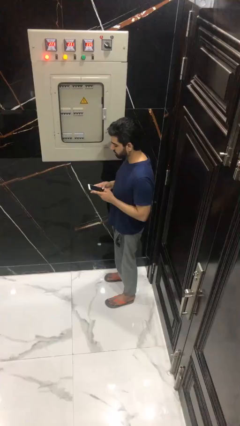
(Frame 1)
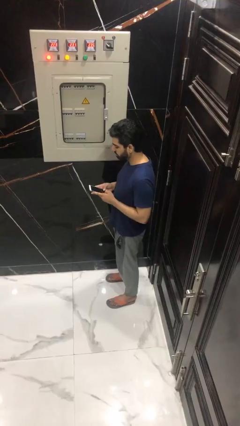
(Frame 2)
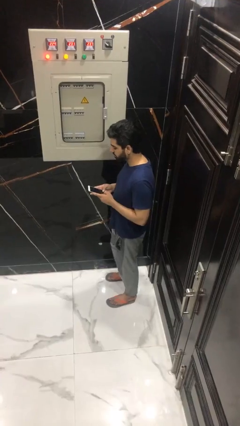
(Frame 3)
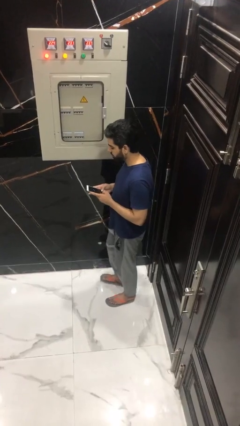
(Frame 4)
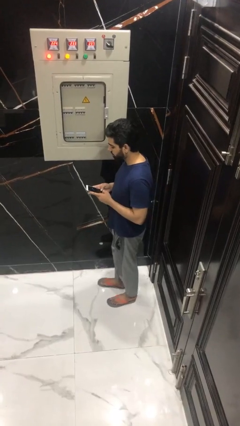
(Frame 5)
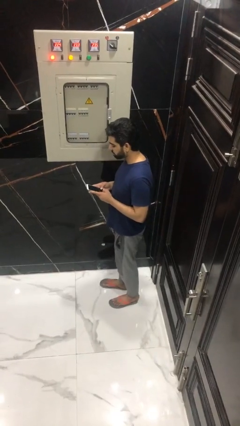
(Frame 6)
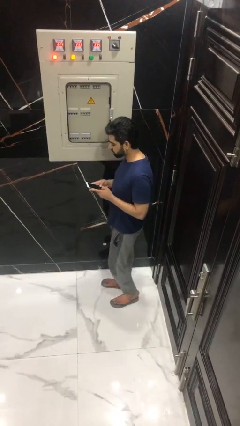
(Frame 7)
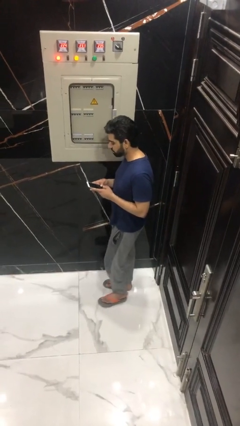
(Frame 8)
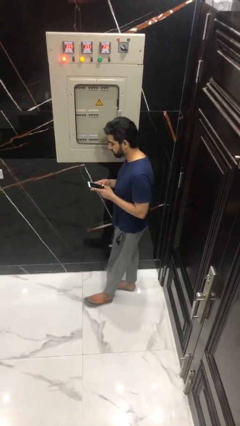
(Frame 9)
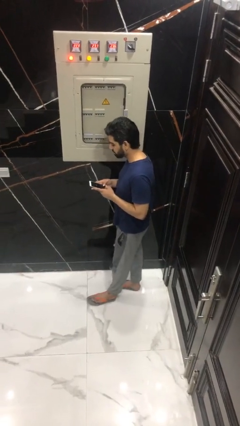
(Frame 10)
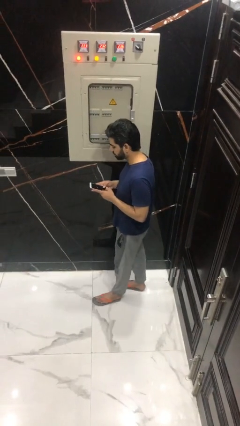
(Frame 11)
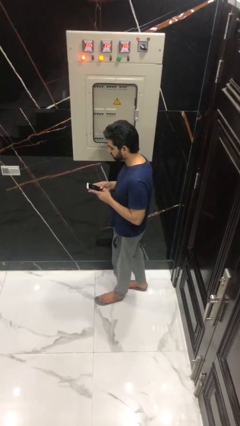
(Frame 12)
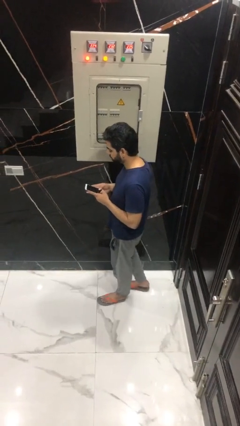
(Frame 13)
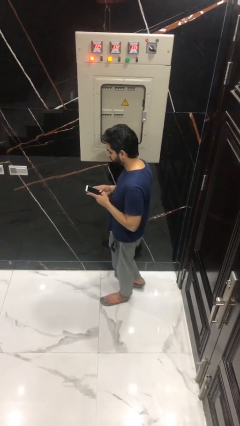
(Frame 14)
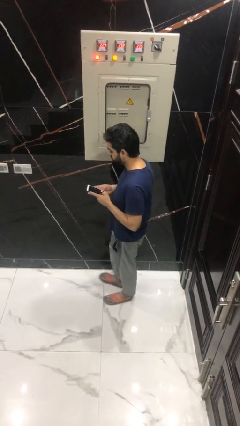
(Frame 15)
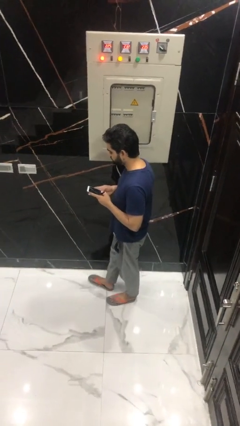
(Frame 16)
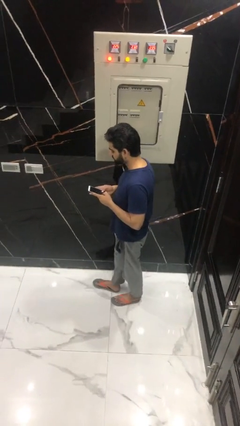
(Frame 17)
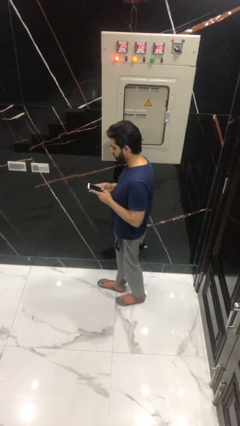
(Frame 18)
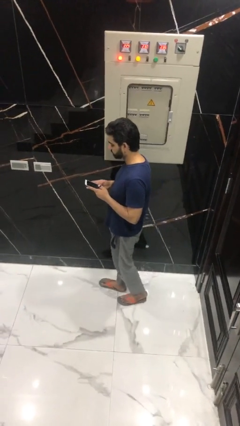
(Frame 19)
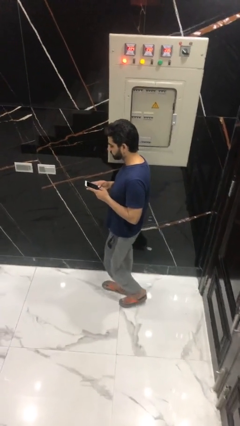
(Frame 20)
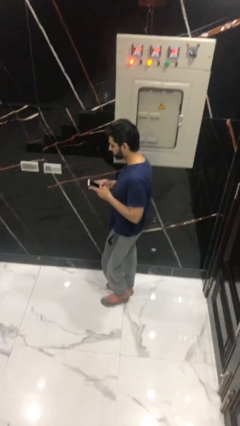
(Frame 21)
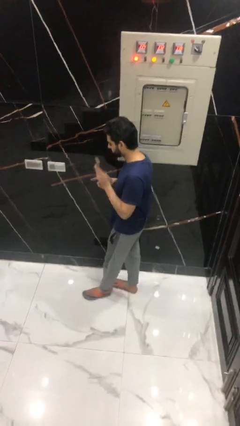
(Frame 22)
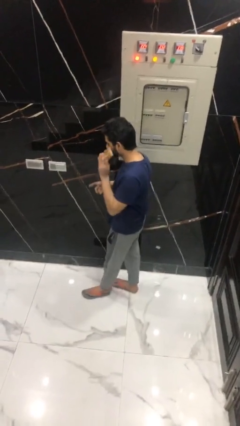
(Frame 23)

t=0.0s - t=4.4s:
person texts on phone

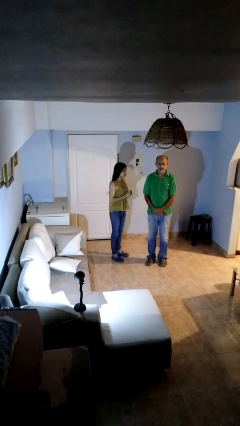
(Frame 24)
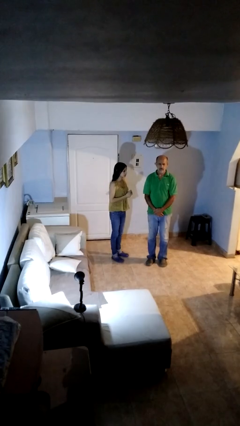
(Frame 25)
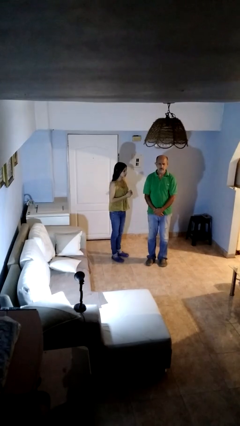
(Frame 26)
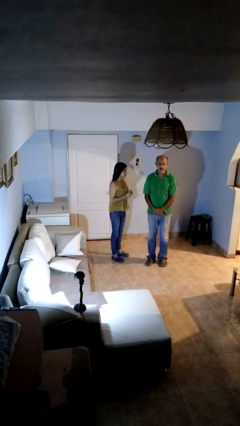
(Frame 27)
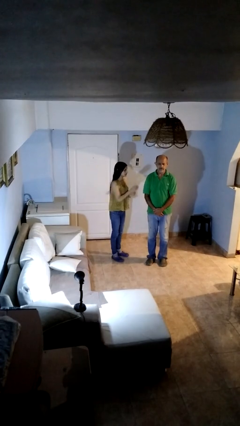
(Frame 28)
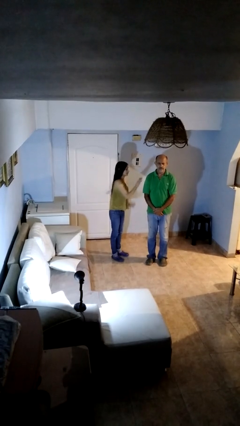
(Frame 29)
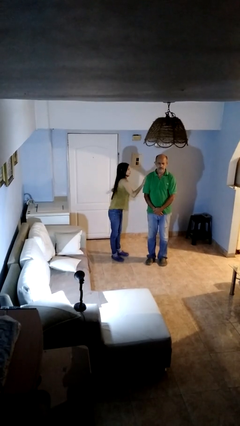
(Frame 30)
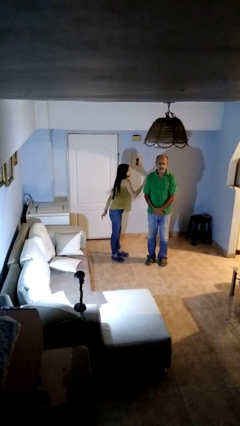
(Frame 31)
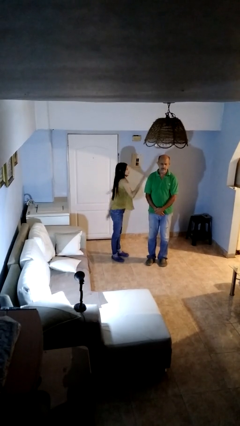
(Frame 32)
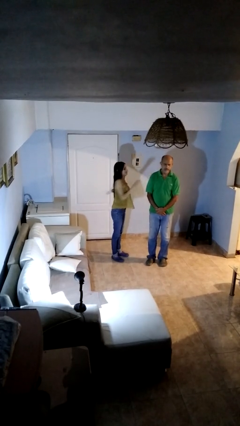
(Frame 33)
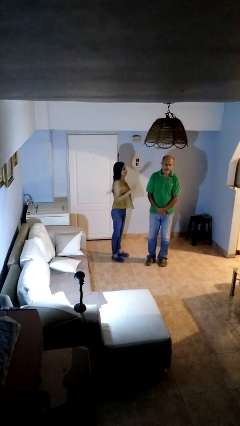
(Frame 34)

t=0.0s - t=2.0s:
person shoves person

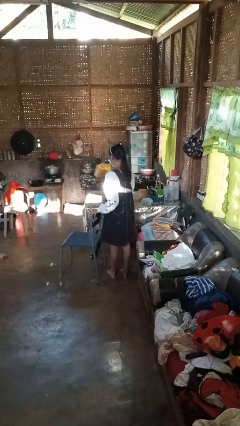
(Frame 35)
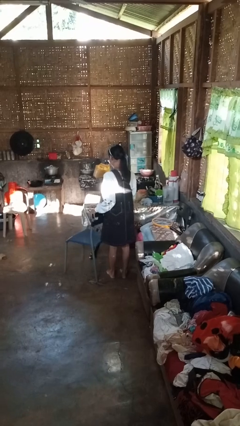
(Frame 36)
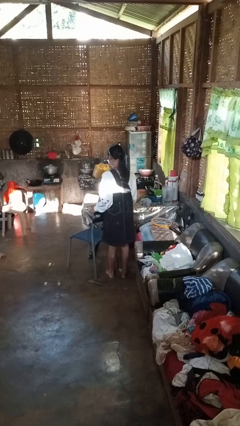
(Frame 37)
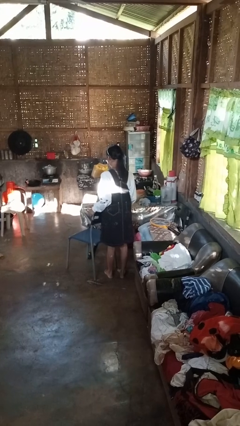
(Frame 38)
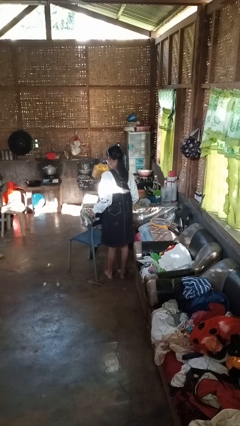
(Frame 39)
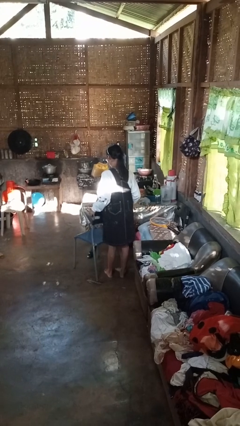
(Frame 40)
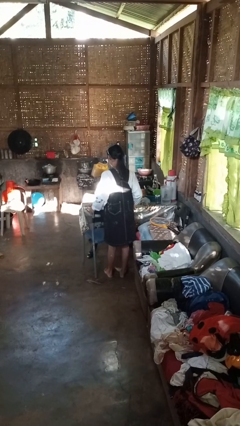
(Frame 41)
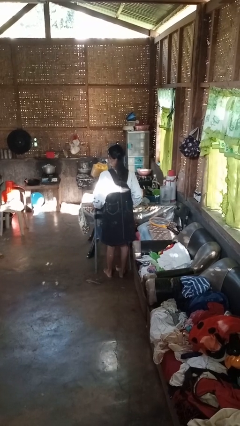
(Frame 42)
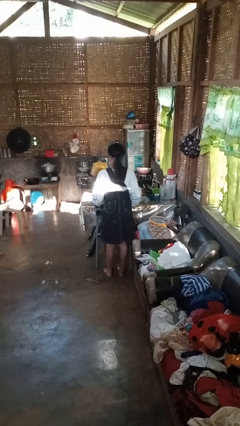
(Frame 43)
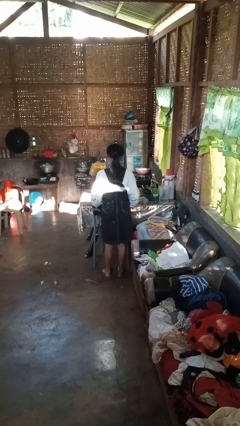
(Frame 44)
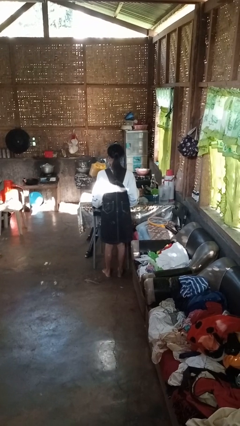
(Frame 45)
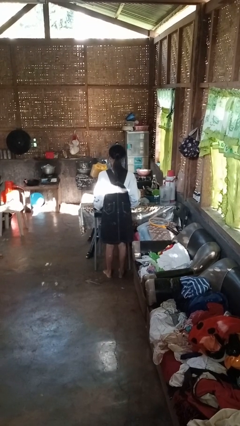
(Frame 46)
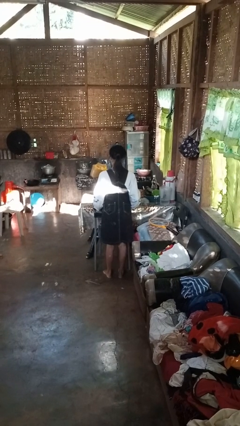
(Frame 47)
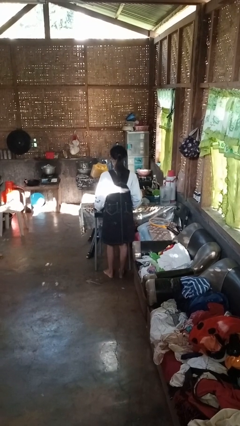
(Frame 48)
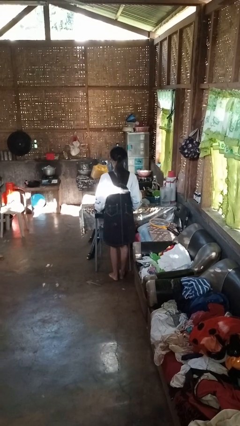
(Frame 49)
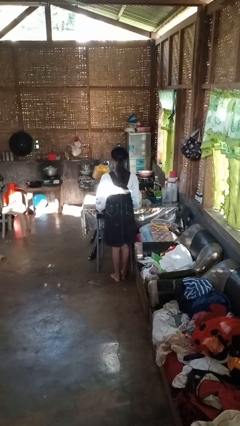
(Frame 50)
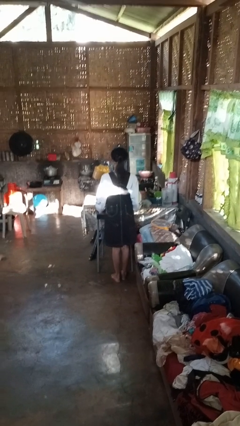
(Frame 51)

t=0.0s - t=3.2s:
person pushes in chair

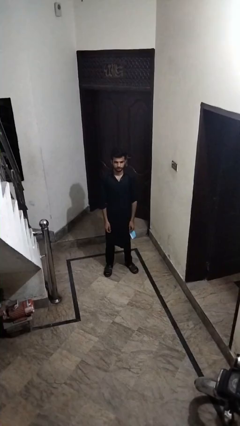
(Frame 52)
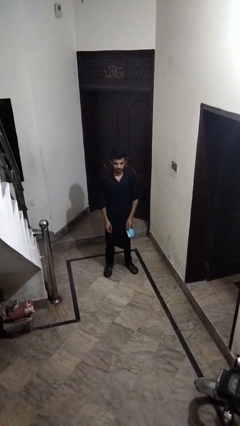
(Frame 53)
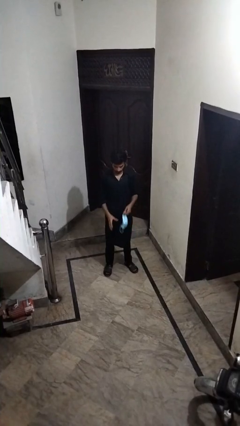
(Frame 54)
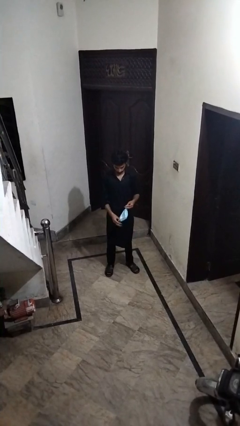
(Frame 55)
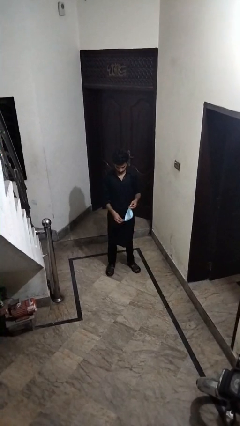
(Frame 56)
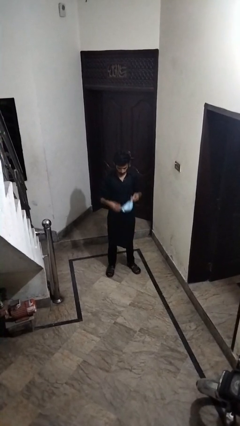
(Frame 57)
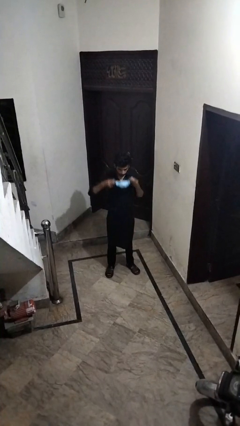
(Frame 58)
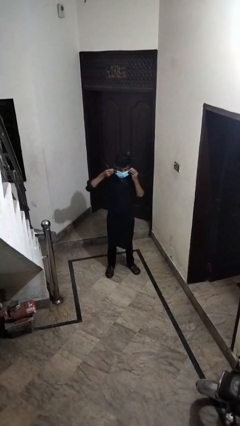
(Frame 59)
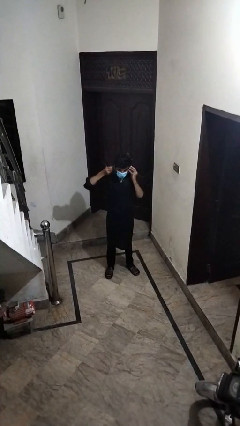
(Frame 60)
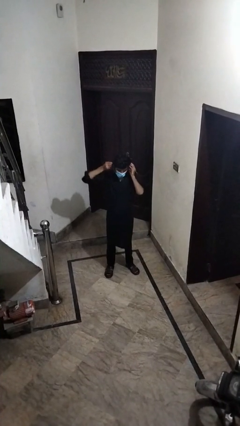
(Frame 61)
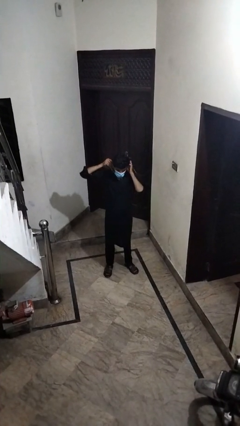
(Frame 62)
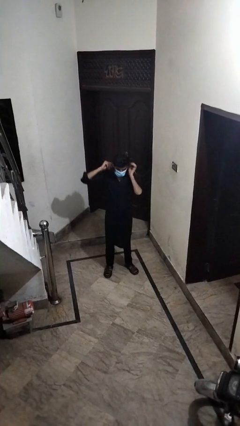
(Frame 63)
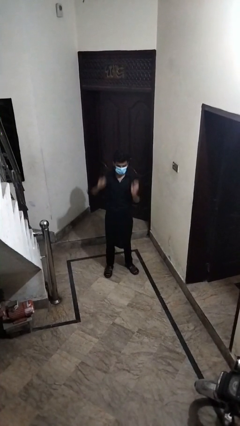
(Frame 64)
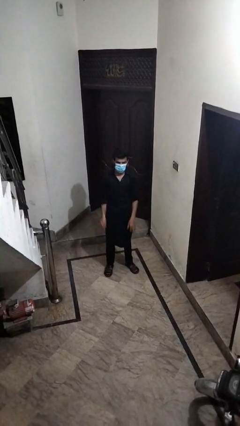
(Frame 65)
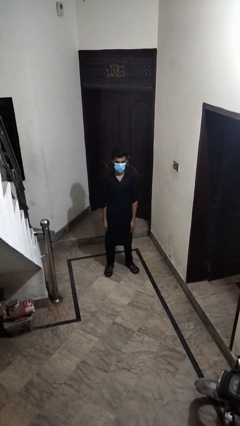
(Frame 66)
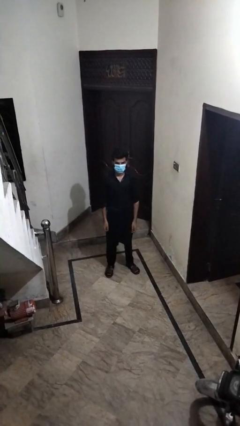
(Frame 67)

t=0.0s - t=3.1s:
person puts on facemask

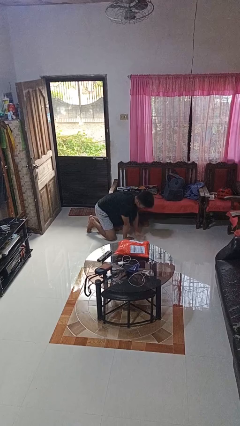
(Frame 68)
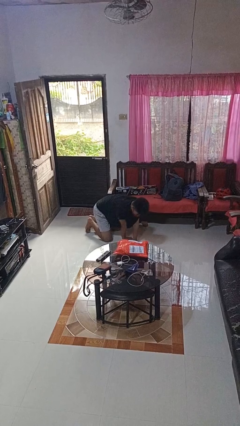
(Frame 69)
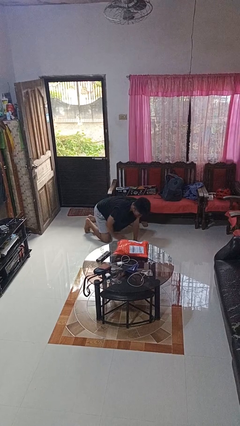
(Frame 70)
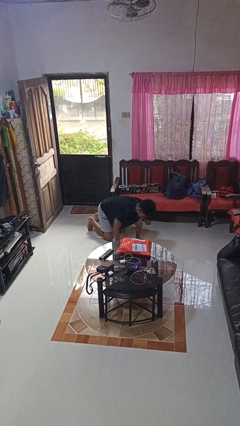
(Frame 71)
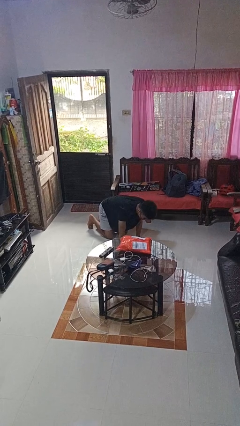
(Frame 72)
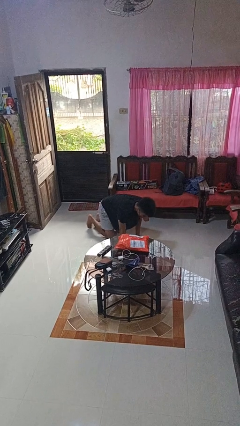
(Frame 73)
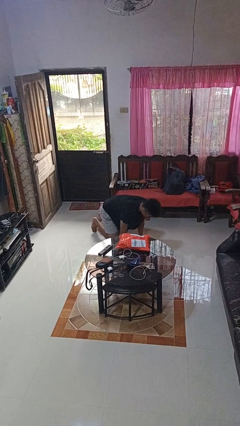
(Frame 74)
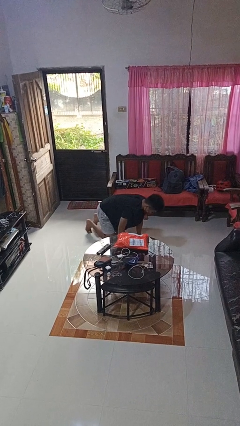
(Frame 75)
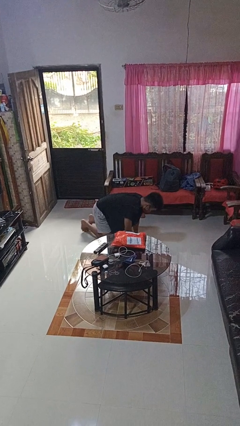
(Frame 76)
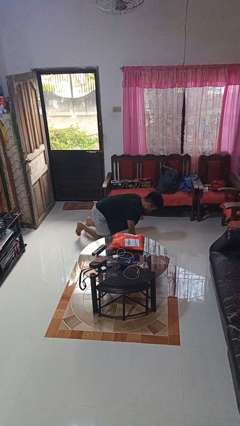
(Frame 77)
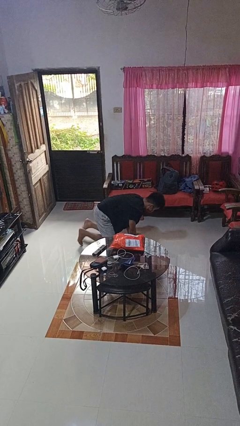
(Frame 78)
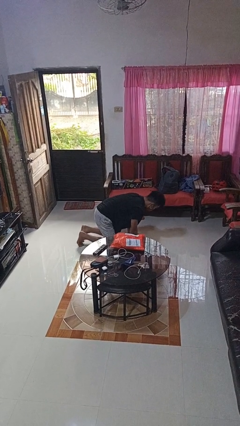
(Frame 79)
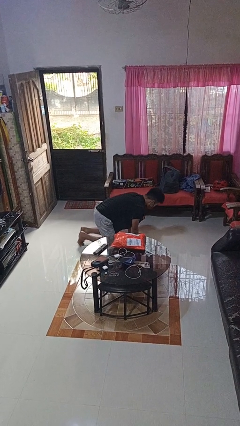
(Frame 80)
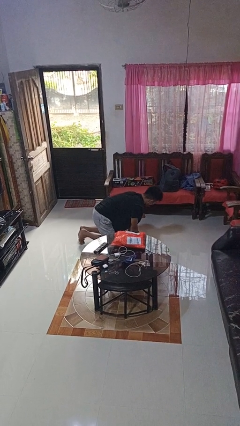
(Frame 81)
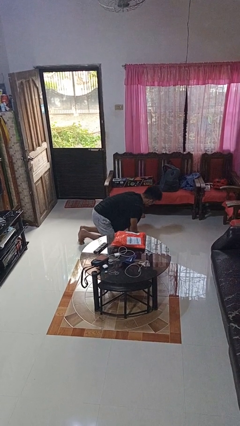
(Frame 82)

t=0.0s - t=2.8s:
person crawls

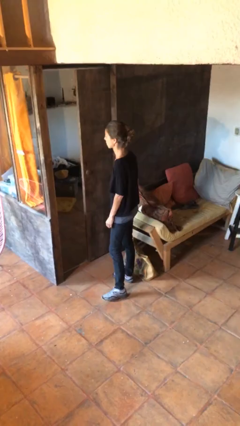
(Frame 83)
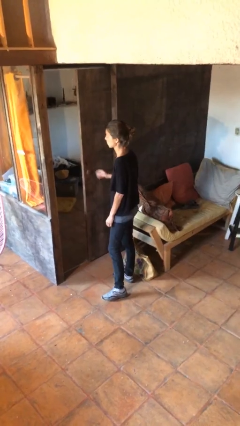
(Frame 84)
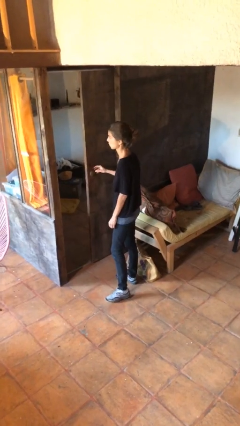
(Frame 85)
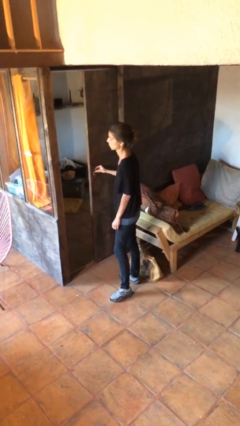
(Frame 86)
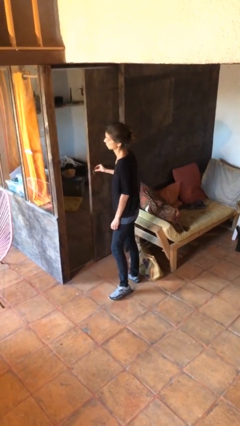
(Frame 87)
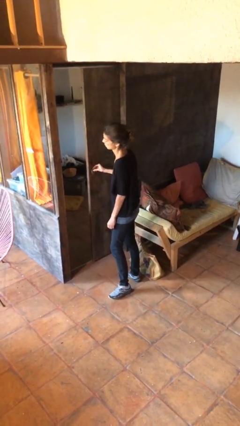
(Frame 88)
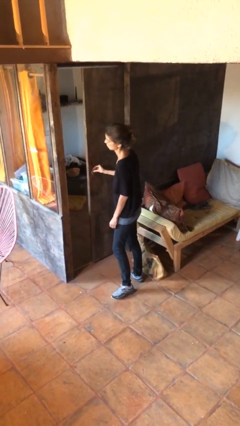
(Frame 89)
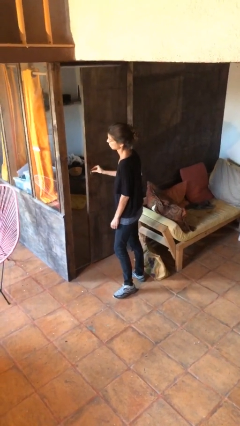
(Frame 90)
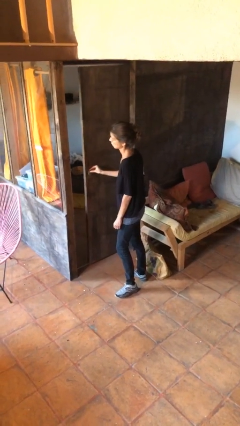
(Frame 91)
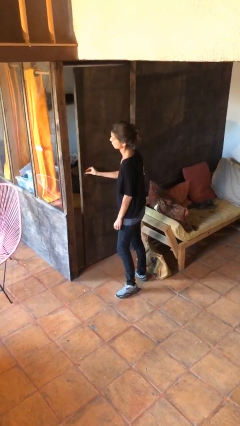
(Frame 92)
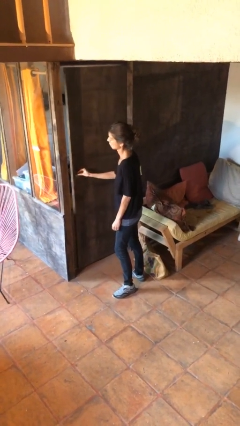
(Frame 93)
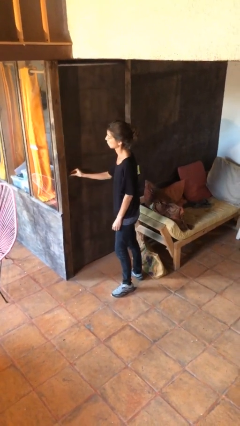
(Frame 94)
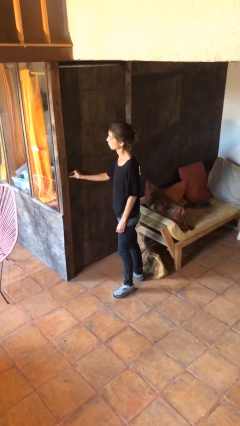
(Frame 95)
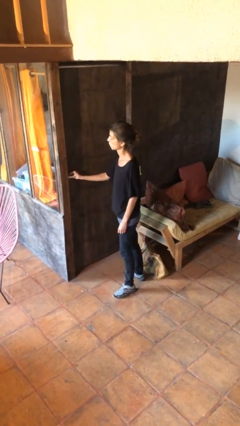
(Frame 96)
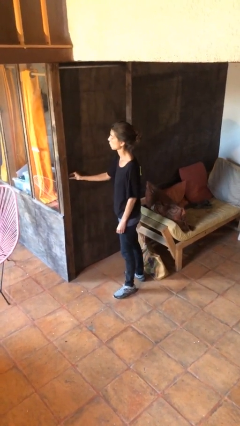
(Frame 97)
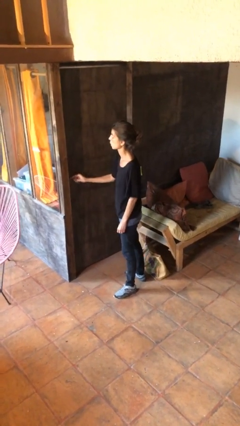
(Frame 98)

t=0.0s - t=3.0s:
person closes facility door
